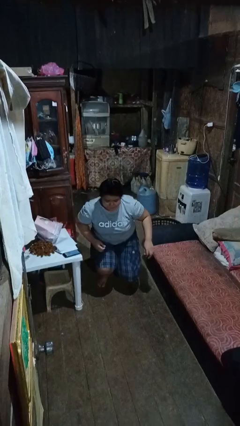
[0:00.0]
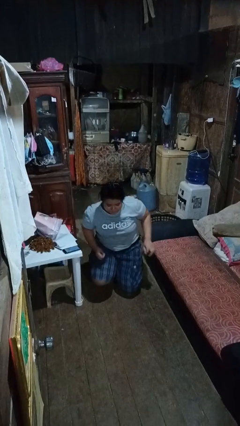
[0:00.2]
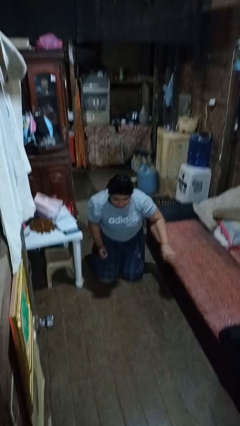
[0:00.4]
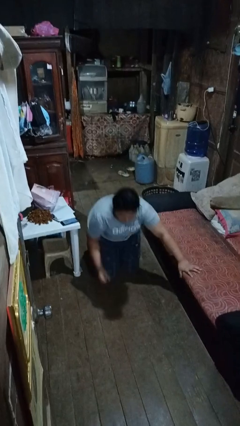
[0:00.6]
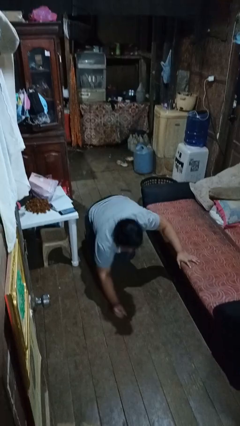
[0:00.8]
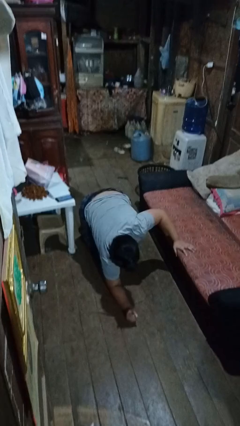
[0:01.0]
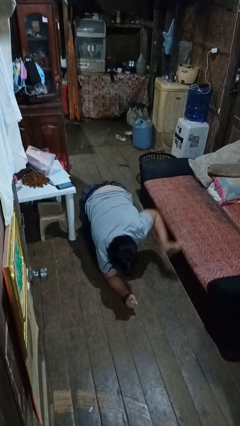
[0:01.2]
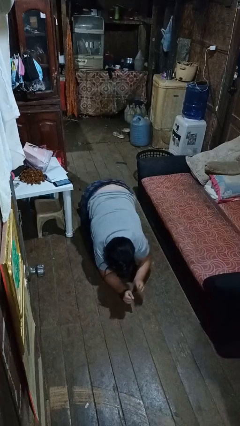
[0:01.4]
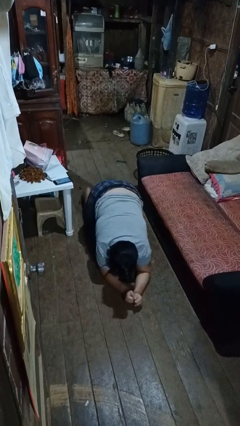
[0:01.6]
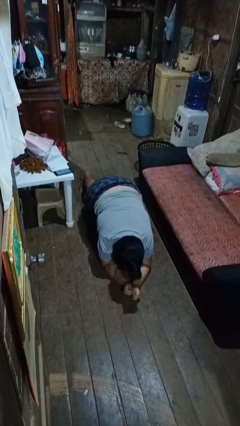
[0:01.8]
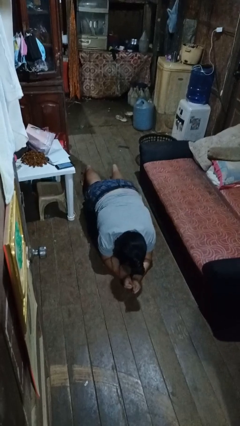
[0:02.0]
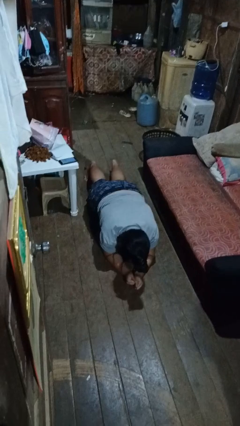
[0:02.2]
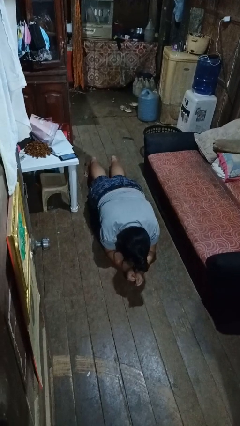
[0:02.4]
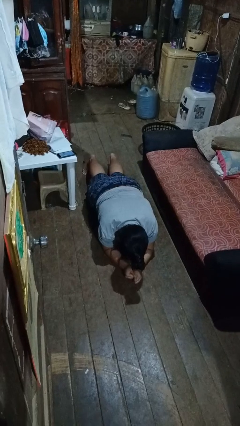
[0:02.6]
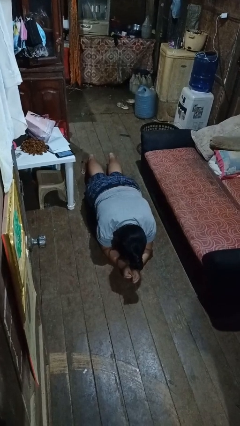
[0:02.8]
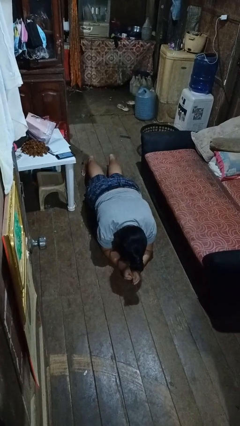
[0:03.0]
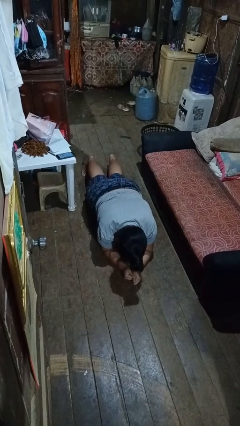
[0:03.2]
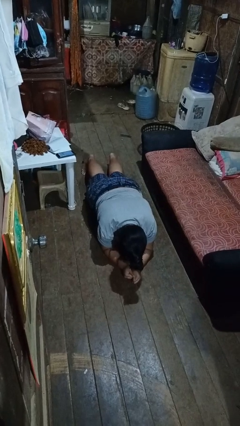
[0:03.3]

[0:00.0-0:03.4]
person exercises with plank

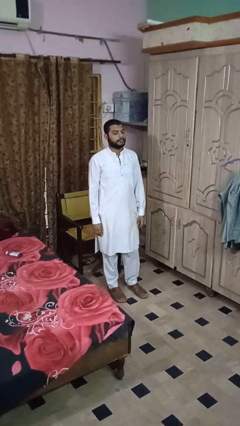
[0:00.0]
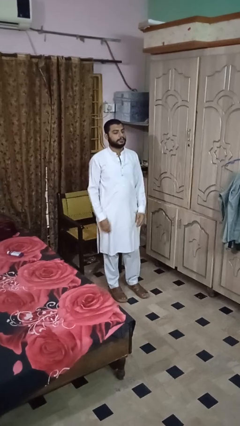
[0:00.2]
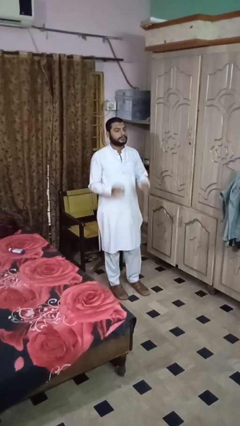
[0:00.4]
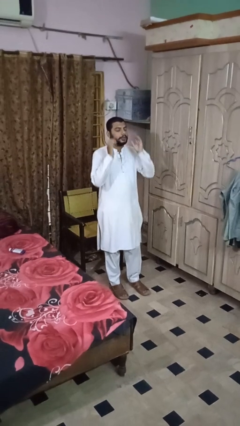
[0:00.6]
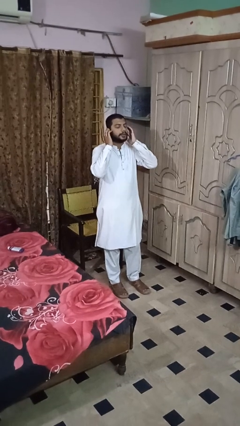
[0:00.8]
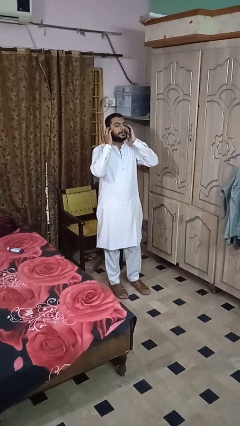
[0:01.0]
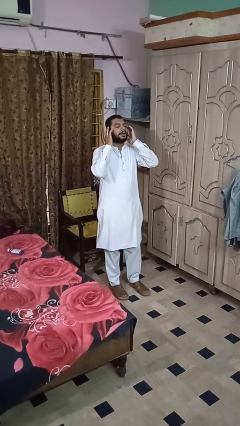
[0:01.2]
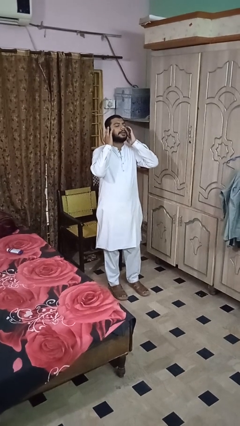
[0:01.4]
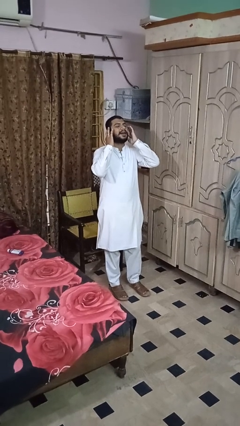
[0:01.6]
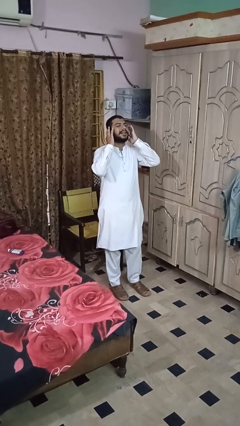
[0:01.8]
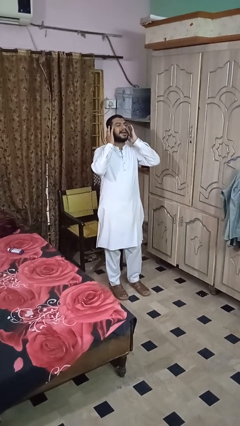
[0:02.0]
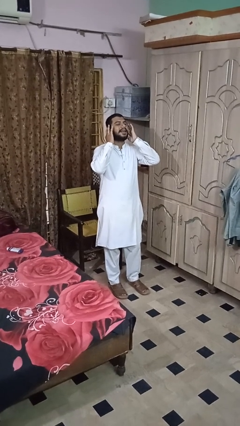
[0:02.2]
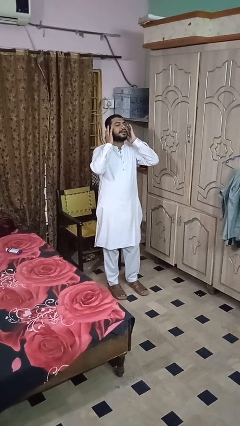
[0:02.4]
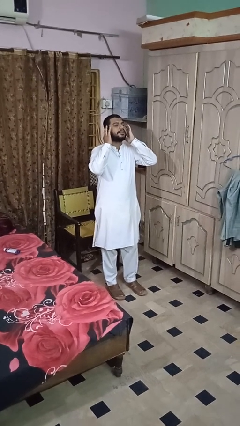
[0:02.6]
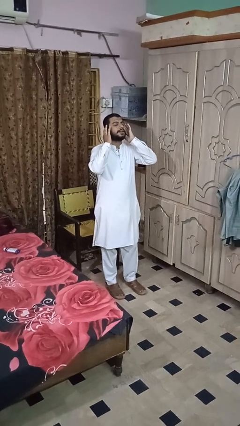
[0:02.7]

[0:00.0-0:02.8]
person puts fingers in ear

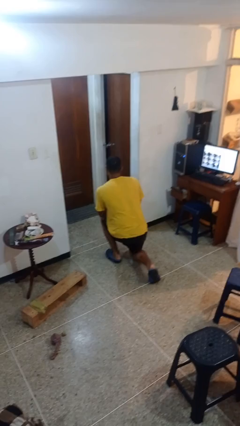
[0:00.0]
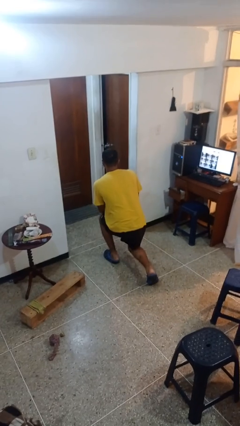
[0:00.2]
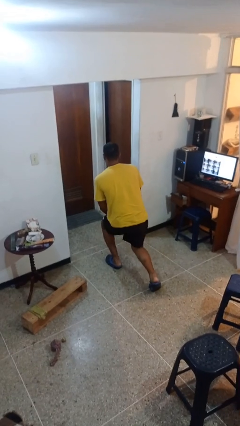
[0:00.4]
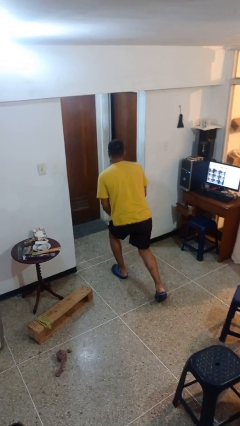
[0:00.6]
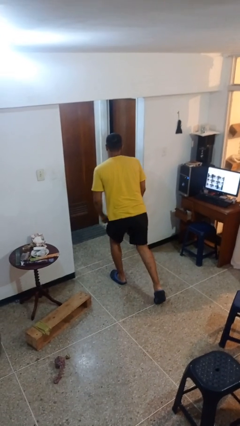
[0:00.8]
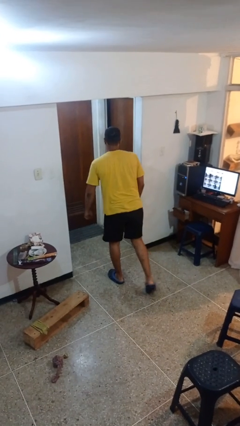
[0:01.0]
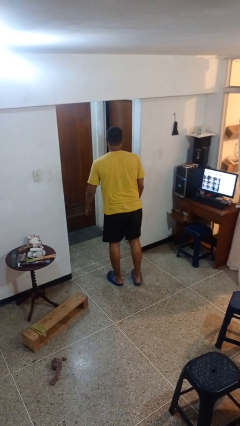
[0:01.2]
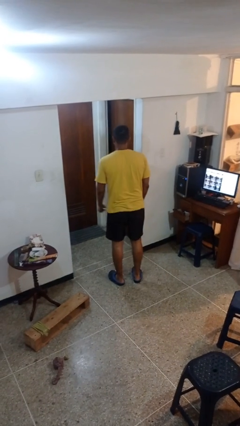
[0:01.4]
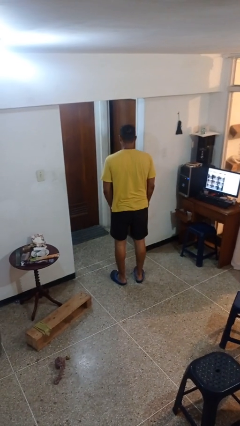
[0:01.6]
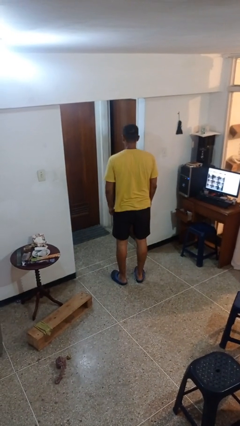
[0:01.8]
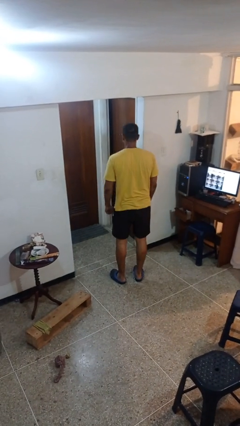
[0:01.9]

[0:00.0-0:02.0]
person stands up from floor

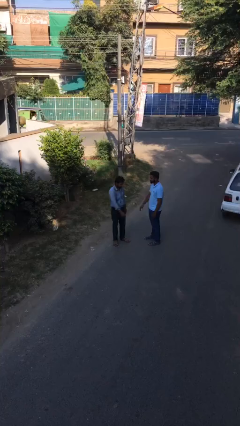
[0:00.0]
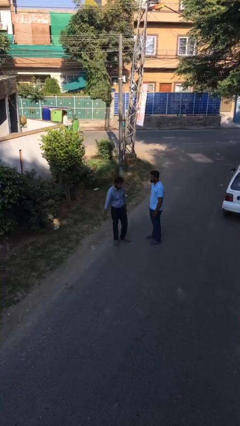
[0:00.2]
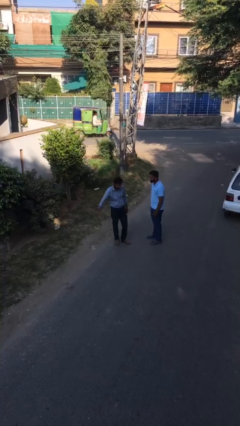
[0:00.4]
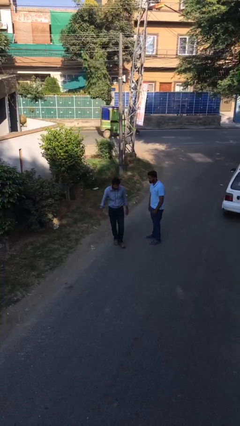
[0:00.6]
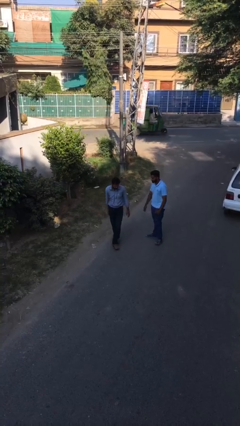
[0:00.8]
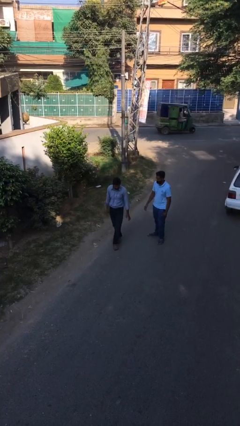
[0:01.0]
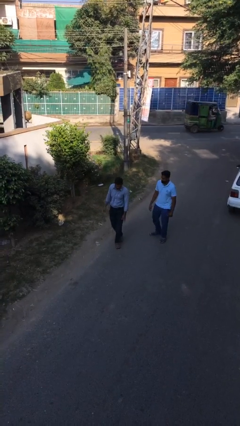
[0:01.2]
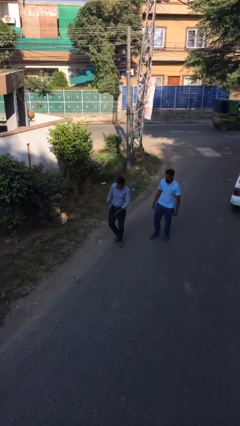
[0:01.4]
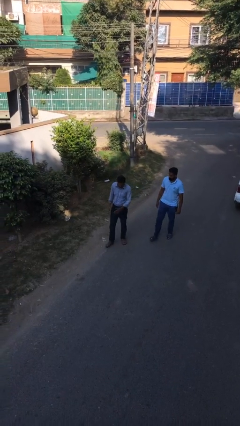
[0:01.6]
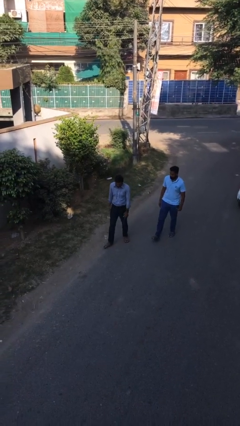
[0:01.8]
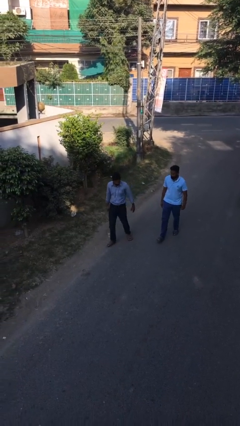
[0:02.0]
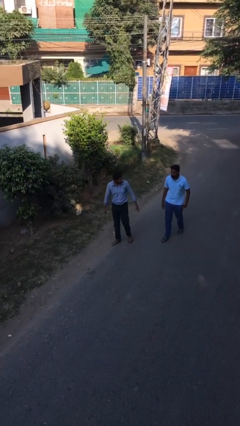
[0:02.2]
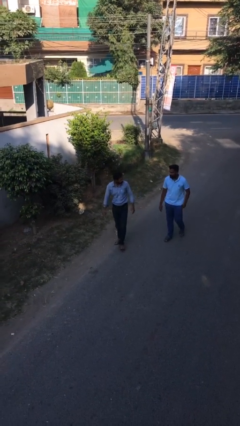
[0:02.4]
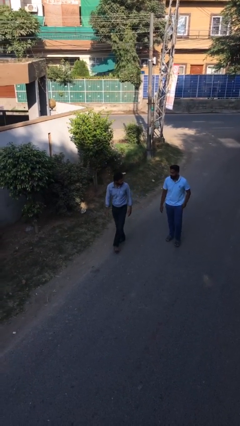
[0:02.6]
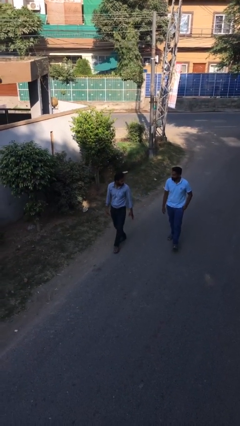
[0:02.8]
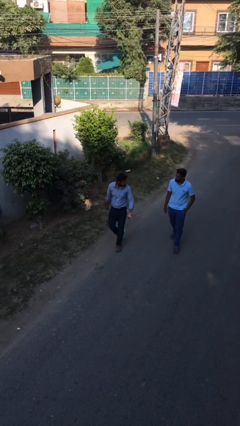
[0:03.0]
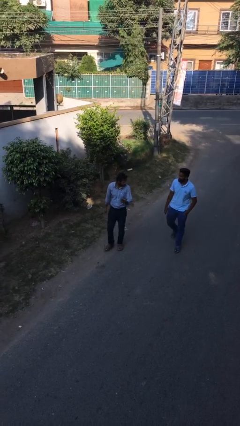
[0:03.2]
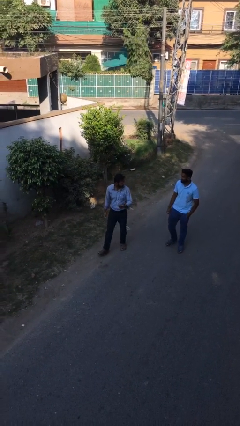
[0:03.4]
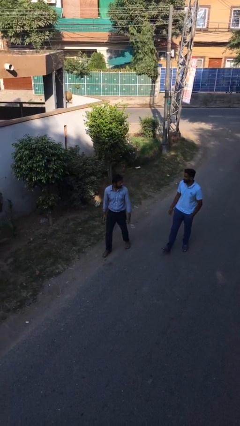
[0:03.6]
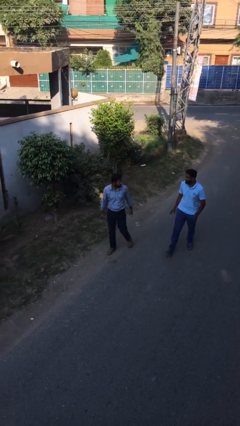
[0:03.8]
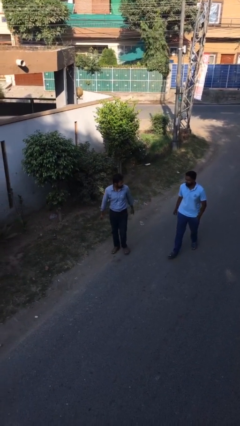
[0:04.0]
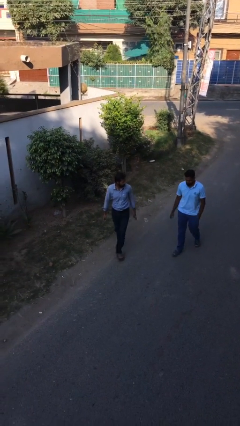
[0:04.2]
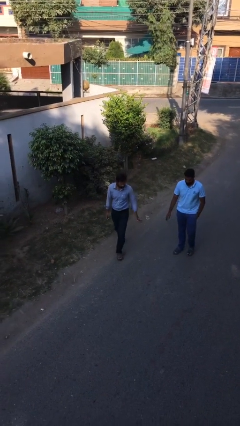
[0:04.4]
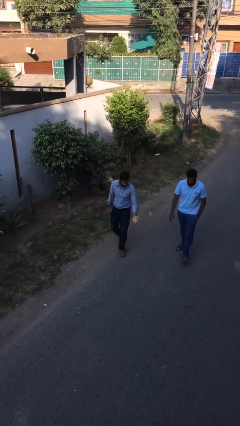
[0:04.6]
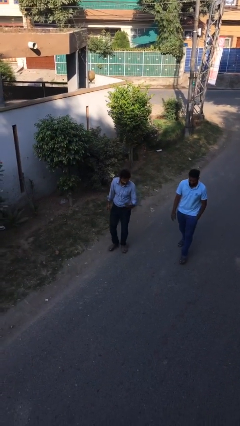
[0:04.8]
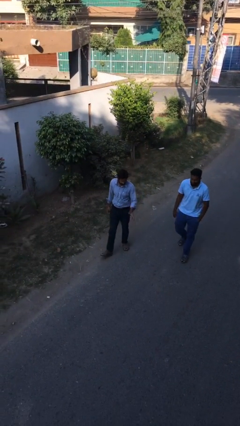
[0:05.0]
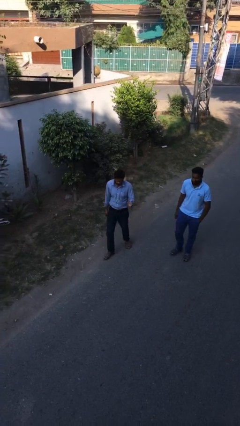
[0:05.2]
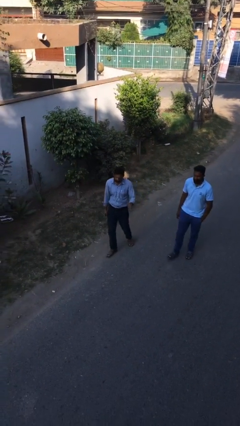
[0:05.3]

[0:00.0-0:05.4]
person talks to person

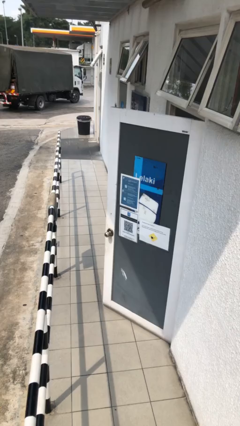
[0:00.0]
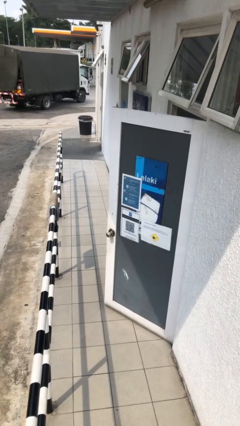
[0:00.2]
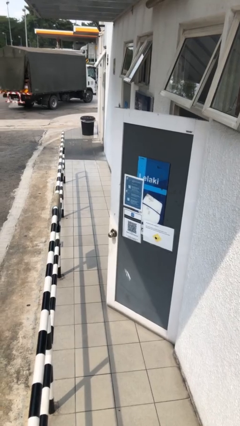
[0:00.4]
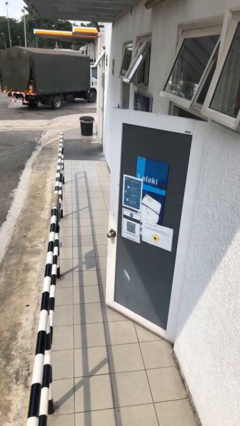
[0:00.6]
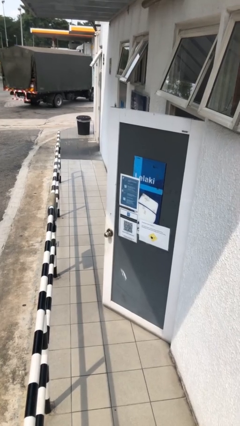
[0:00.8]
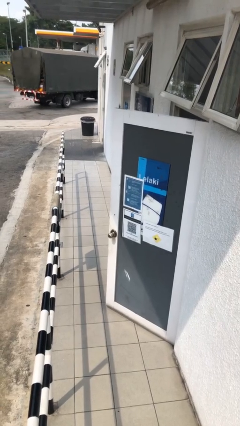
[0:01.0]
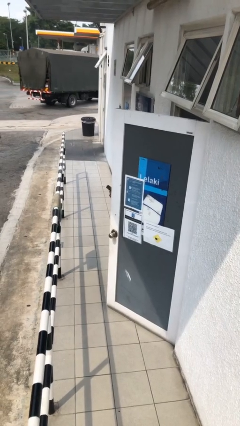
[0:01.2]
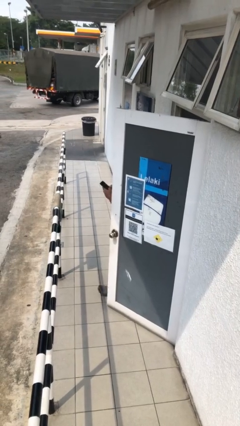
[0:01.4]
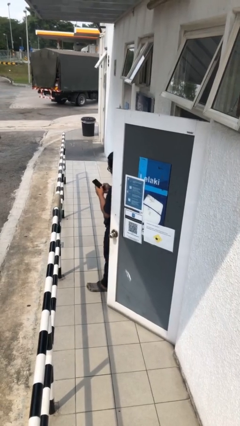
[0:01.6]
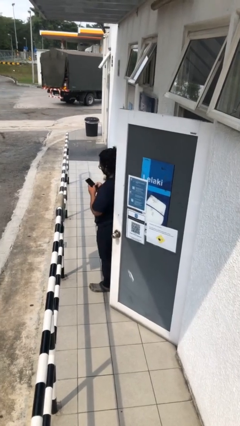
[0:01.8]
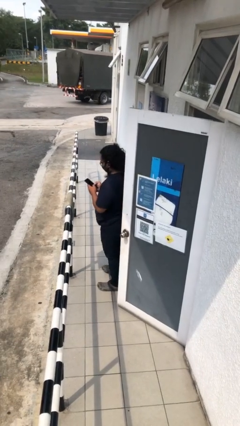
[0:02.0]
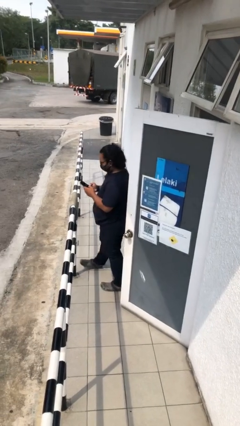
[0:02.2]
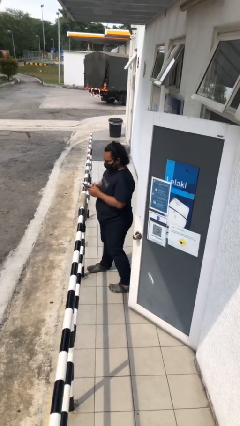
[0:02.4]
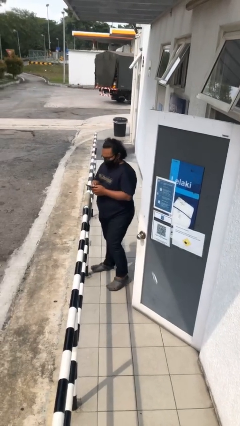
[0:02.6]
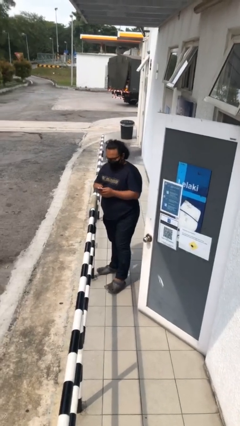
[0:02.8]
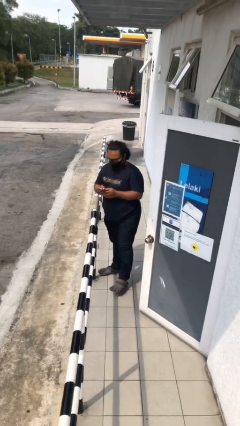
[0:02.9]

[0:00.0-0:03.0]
person enters scene through structure

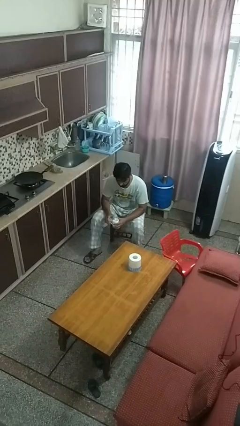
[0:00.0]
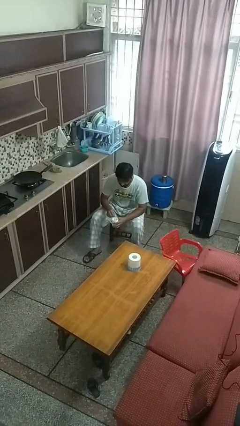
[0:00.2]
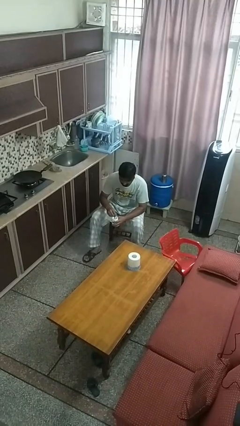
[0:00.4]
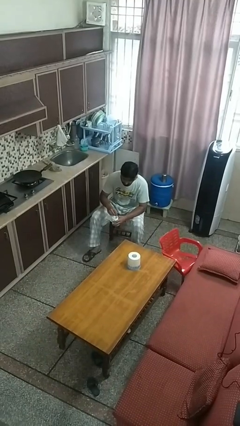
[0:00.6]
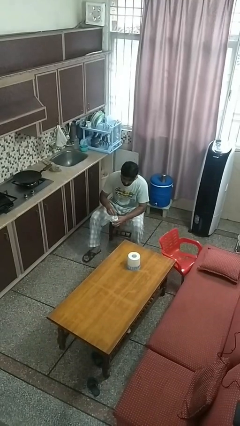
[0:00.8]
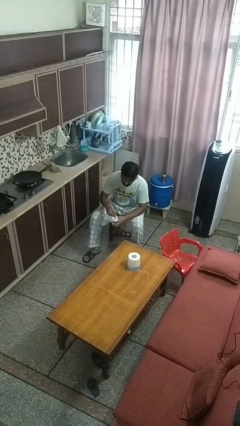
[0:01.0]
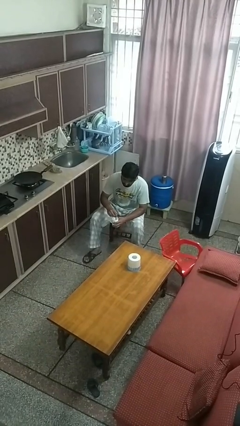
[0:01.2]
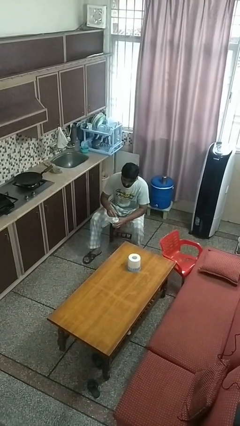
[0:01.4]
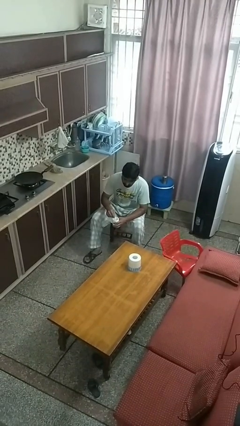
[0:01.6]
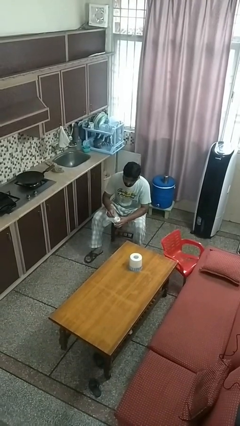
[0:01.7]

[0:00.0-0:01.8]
person stirs mug
